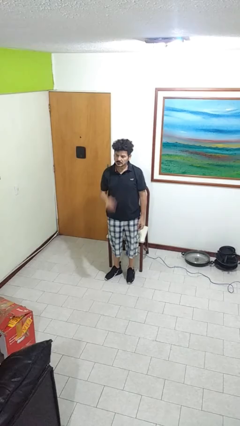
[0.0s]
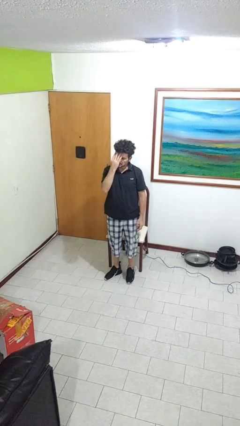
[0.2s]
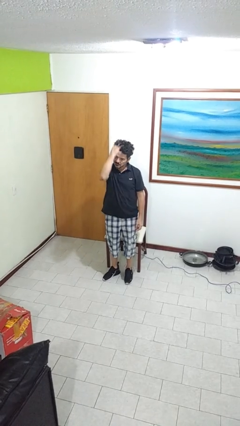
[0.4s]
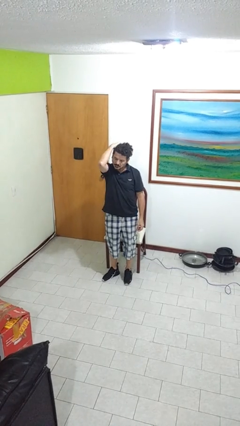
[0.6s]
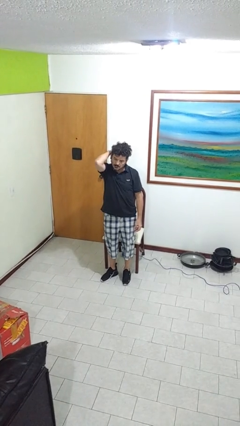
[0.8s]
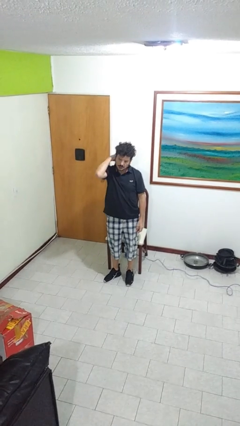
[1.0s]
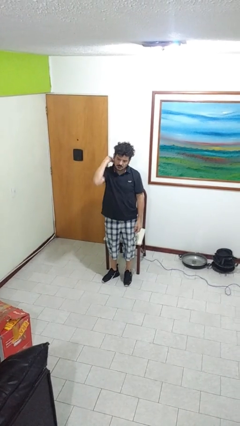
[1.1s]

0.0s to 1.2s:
person strokes hair

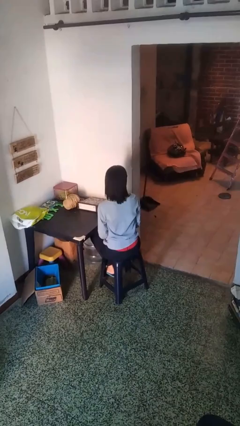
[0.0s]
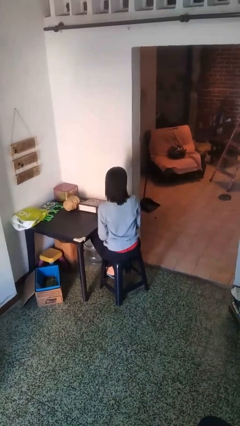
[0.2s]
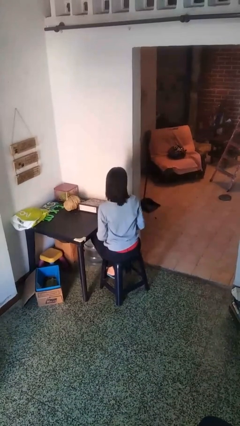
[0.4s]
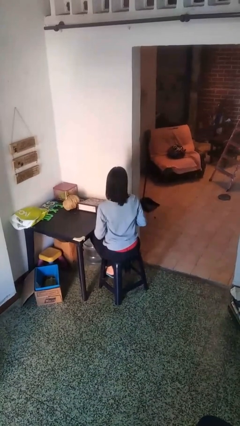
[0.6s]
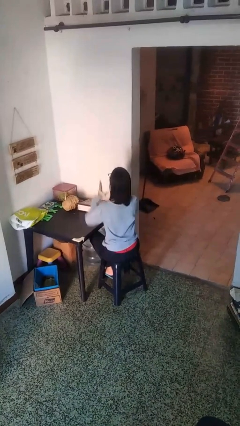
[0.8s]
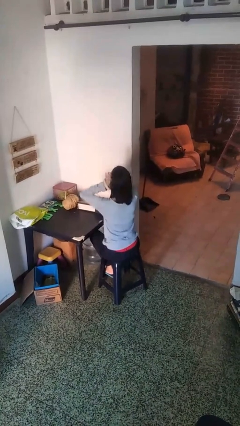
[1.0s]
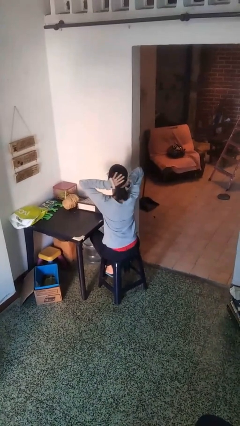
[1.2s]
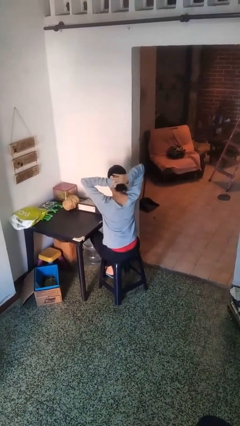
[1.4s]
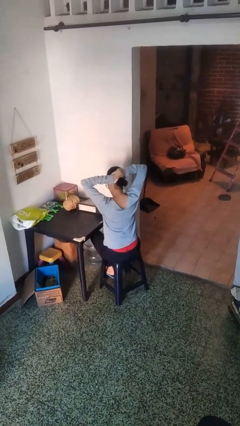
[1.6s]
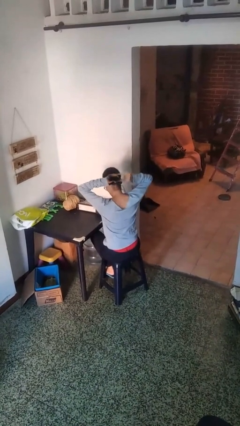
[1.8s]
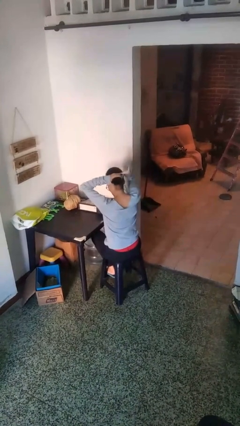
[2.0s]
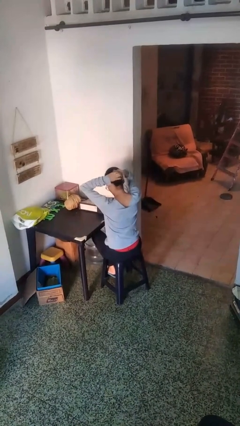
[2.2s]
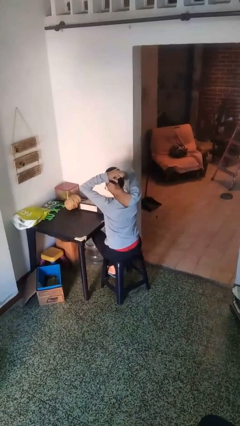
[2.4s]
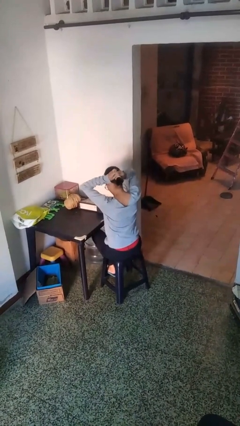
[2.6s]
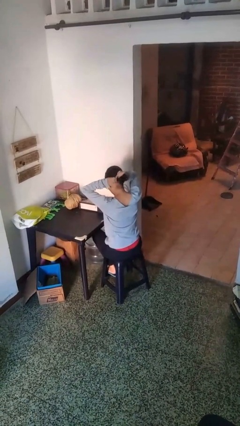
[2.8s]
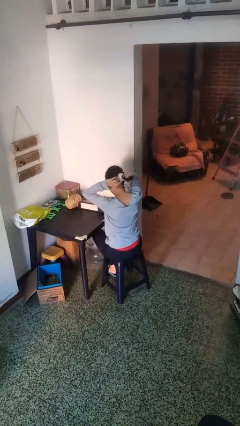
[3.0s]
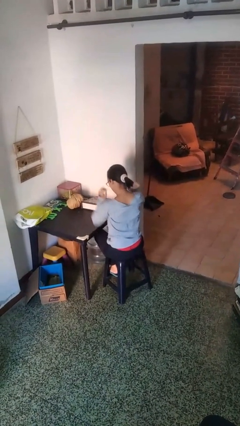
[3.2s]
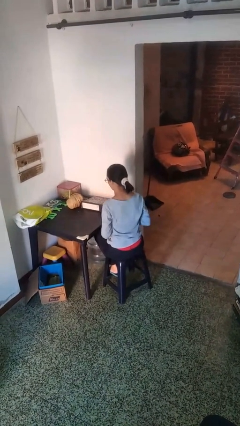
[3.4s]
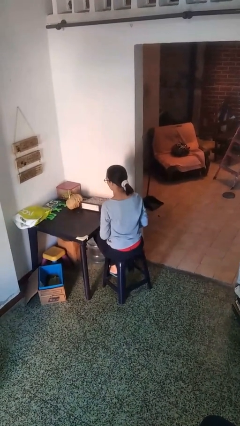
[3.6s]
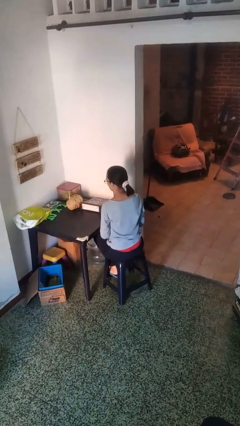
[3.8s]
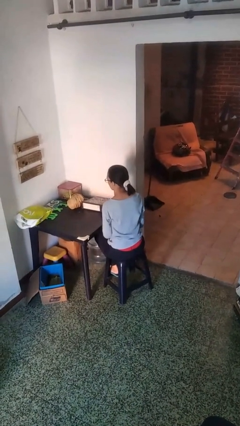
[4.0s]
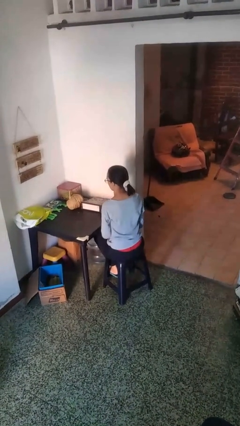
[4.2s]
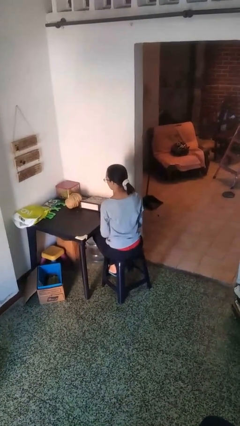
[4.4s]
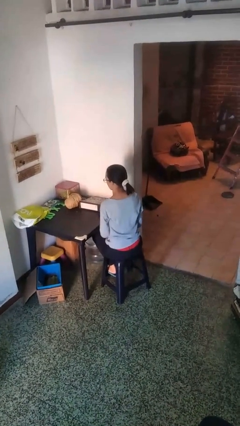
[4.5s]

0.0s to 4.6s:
person puts hair in ponytail

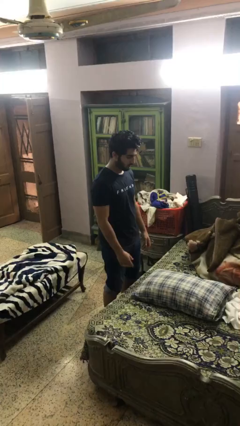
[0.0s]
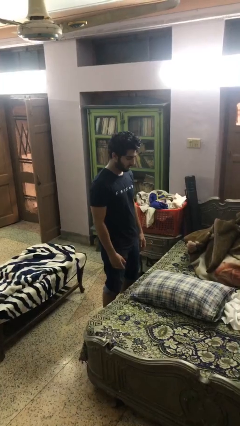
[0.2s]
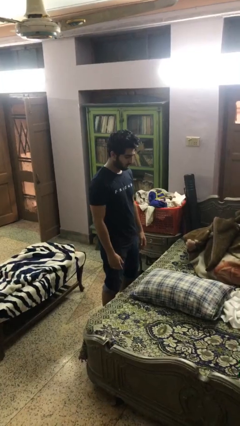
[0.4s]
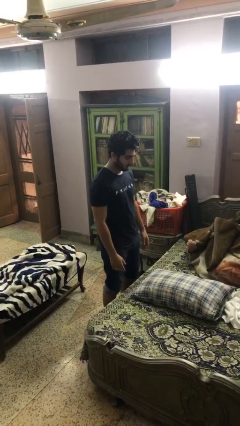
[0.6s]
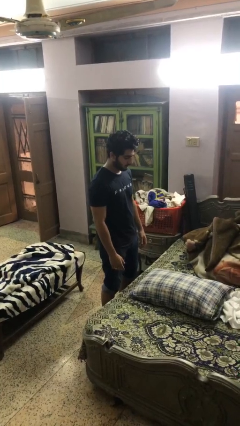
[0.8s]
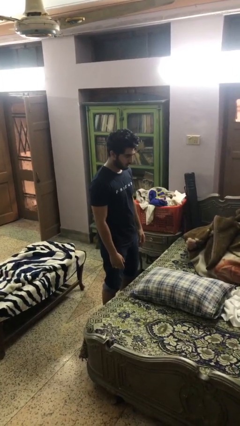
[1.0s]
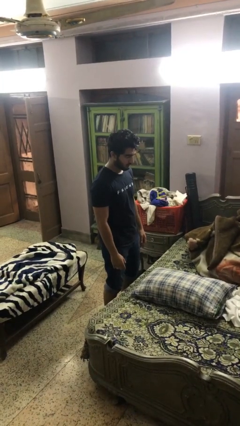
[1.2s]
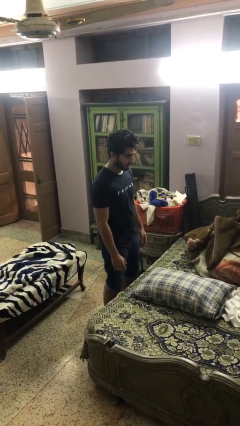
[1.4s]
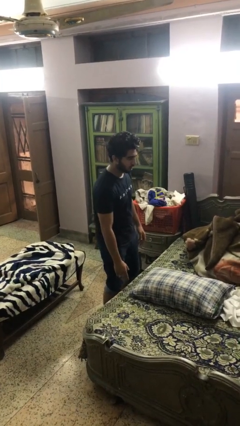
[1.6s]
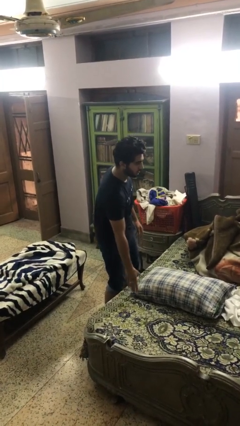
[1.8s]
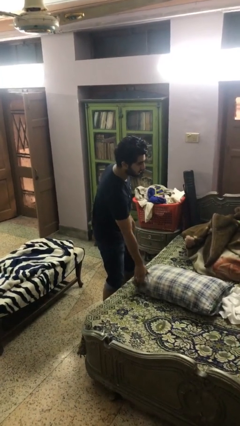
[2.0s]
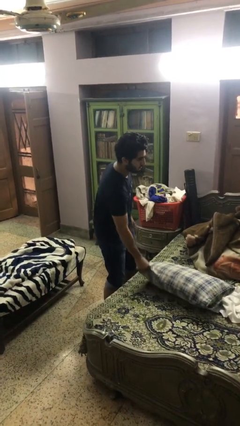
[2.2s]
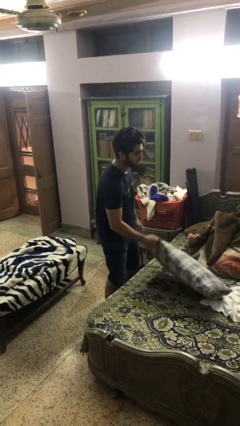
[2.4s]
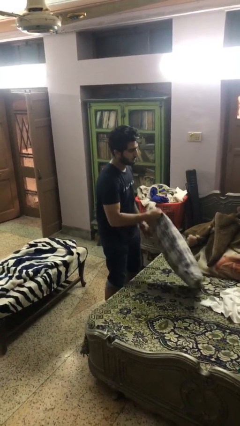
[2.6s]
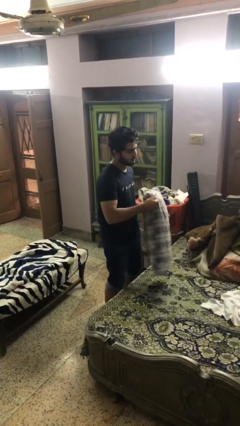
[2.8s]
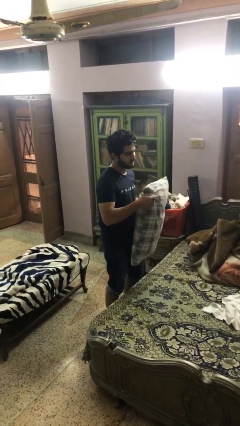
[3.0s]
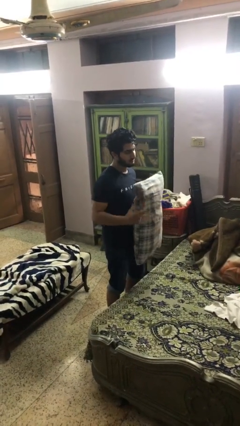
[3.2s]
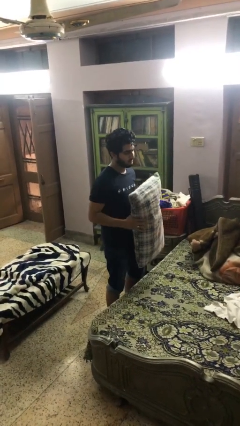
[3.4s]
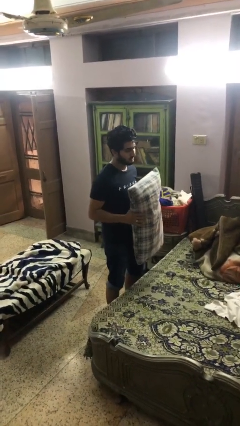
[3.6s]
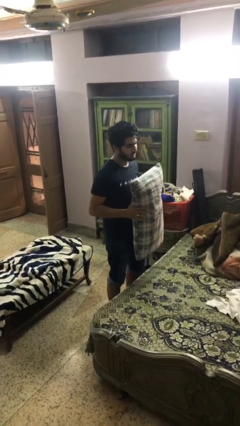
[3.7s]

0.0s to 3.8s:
person picks up object from bed

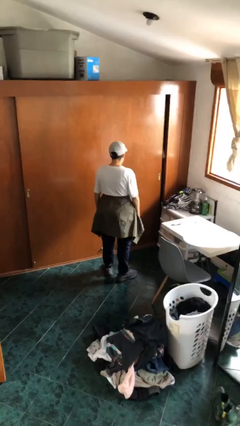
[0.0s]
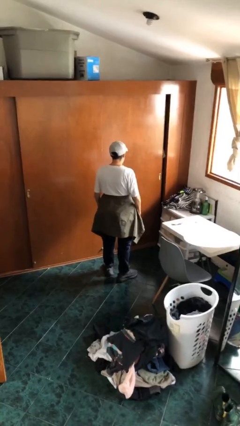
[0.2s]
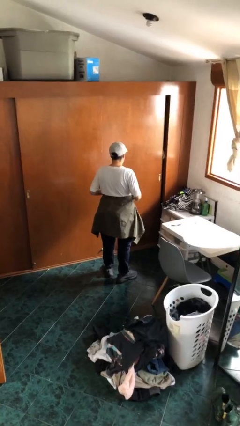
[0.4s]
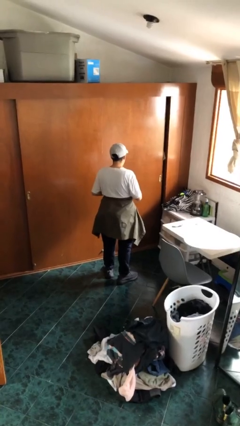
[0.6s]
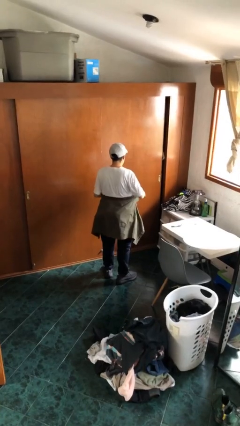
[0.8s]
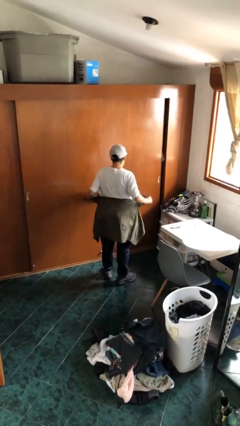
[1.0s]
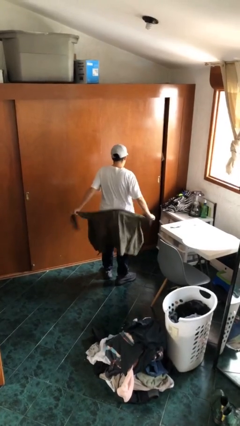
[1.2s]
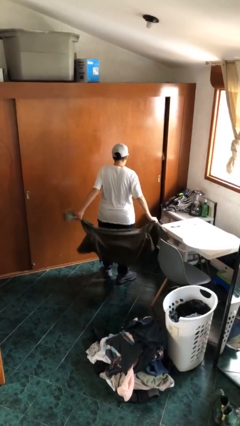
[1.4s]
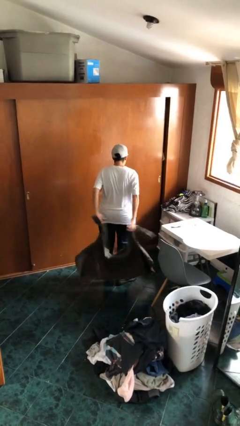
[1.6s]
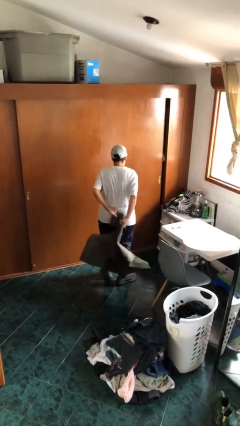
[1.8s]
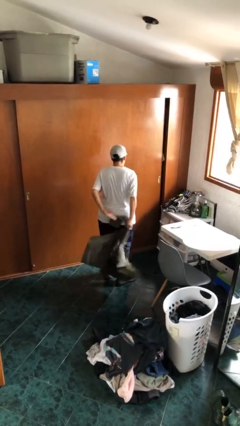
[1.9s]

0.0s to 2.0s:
person unties jacket around waist

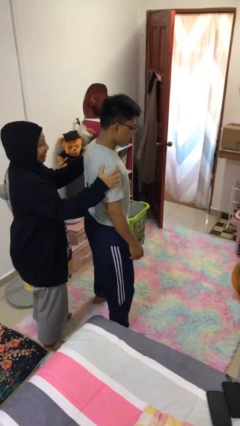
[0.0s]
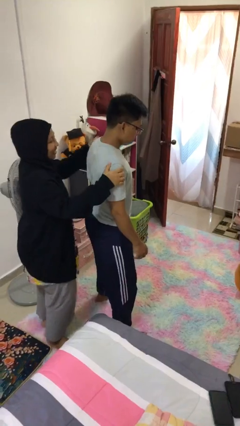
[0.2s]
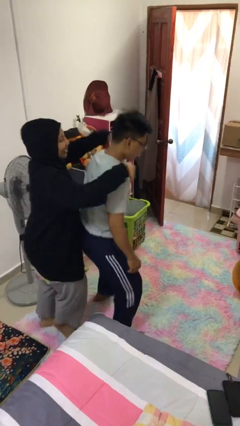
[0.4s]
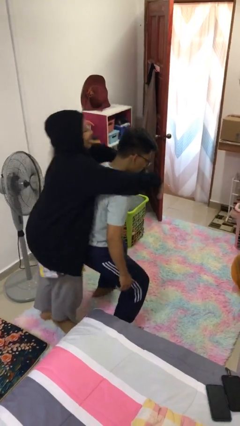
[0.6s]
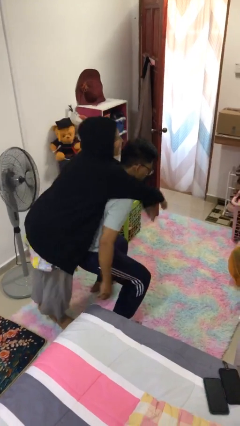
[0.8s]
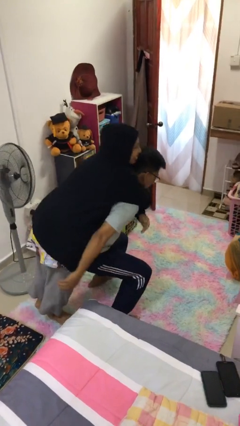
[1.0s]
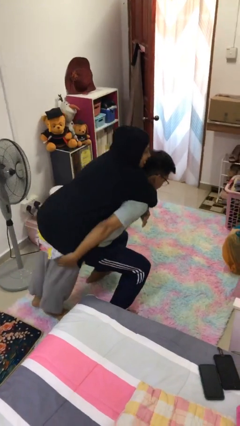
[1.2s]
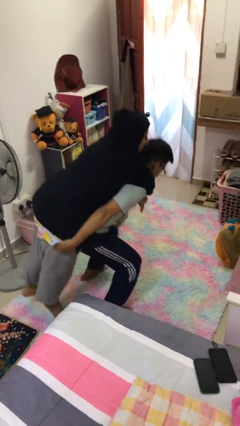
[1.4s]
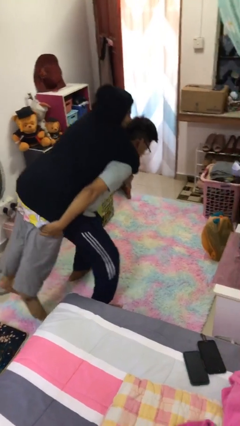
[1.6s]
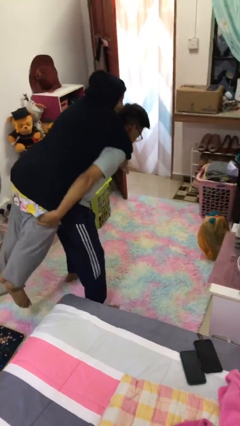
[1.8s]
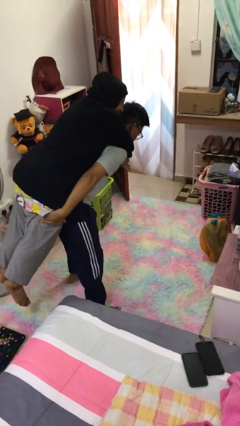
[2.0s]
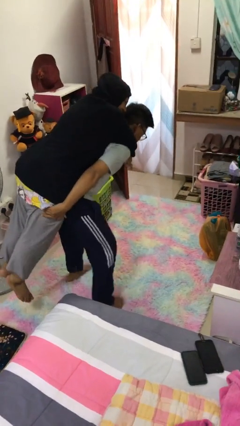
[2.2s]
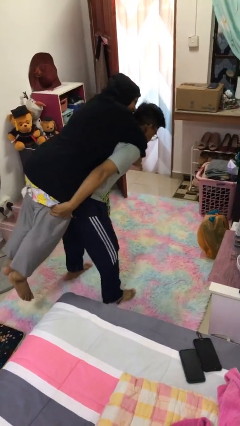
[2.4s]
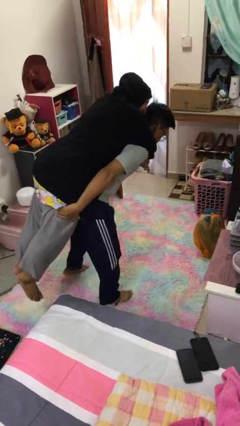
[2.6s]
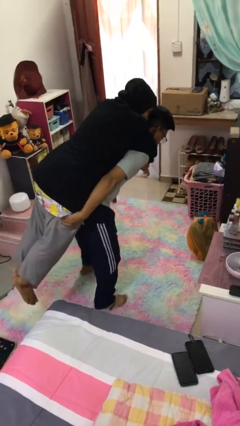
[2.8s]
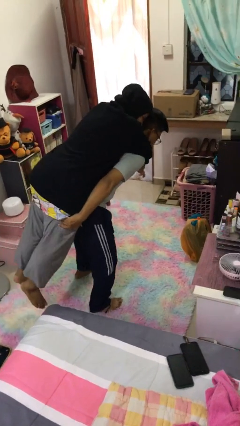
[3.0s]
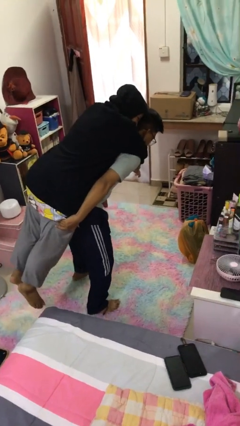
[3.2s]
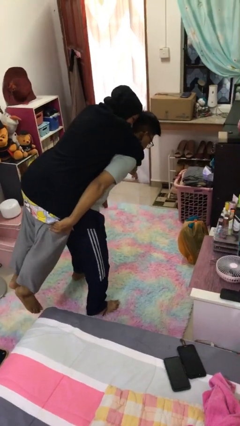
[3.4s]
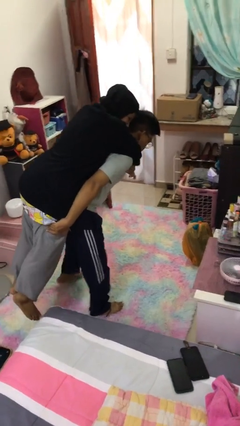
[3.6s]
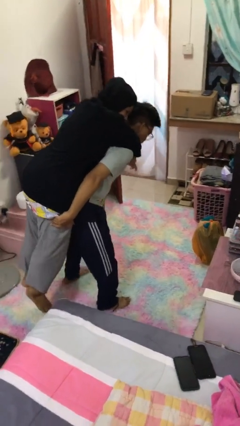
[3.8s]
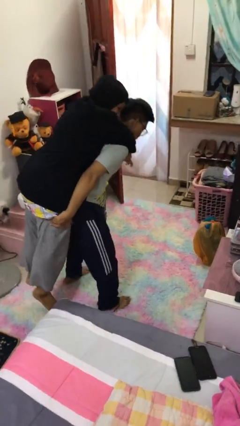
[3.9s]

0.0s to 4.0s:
person carries person on back

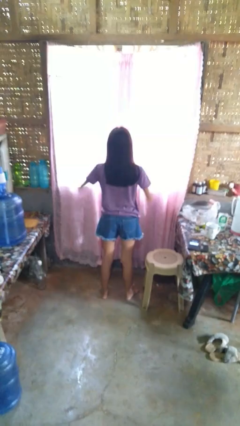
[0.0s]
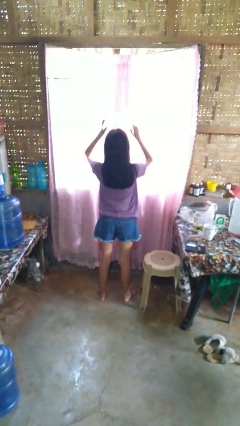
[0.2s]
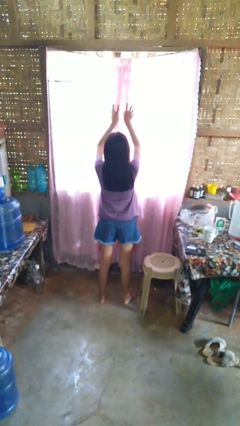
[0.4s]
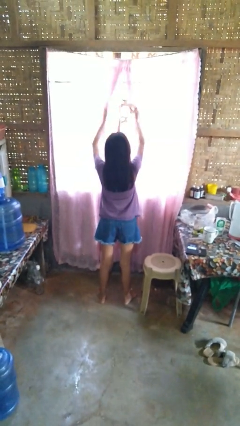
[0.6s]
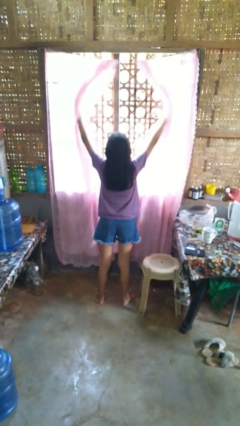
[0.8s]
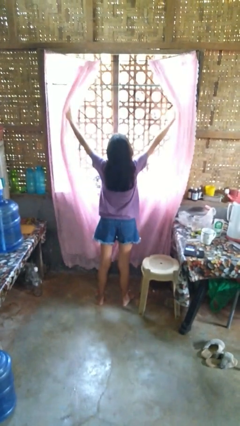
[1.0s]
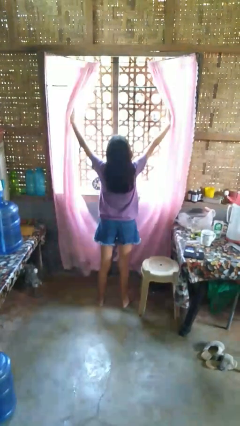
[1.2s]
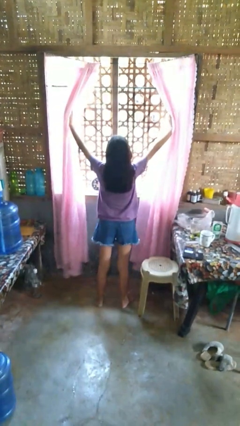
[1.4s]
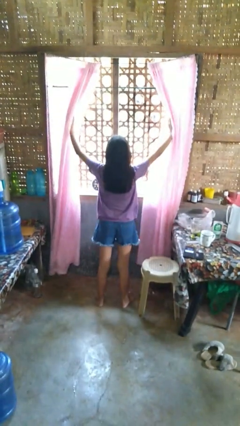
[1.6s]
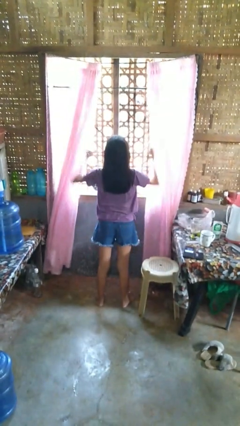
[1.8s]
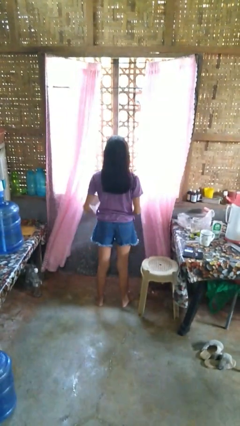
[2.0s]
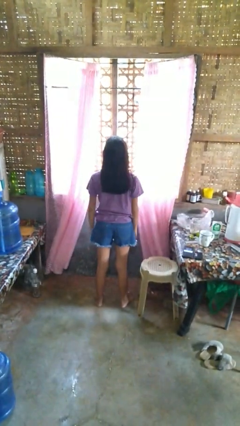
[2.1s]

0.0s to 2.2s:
person opens curtains
